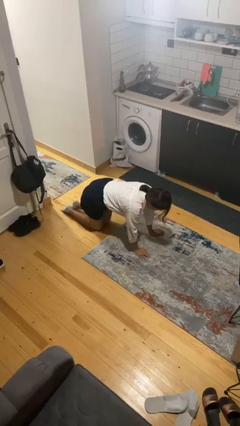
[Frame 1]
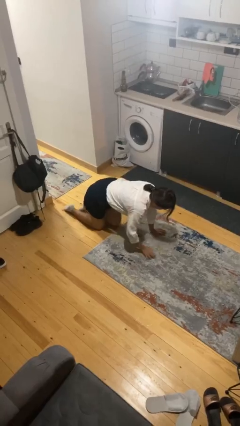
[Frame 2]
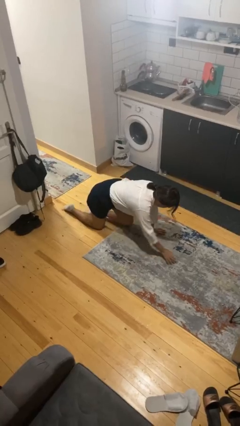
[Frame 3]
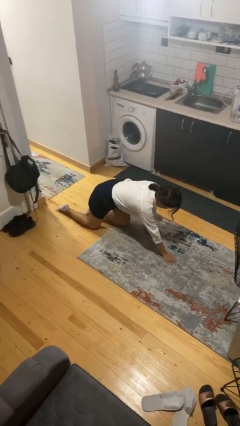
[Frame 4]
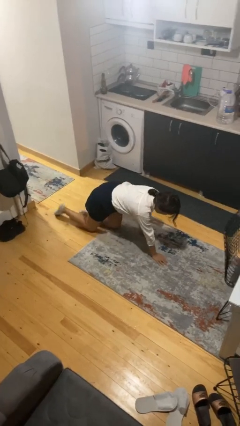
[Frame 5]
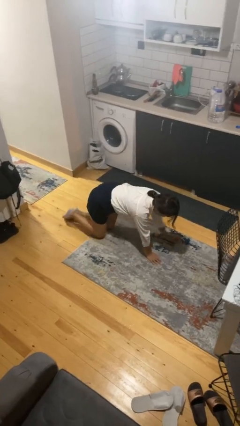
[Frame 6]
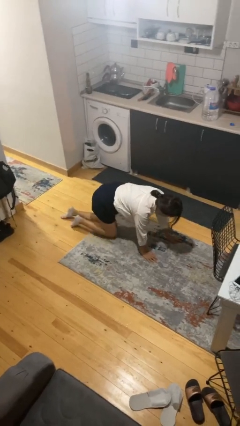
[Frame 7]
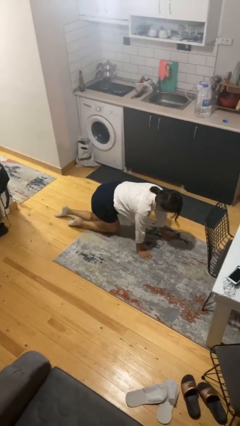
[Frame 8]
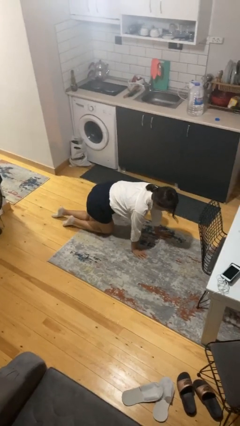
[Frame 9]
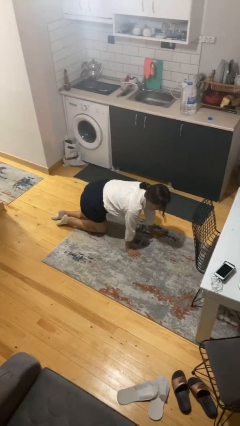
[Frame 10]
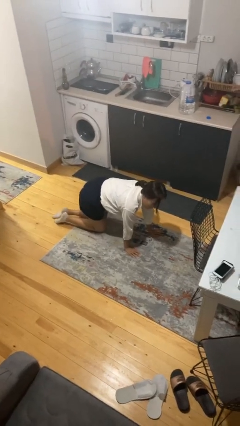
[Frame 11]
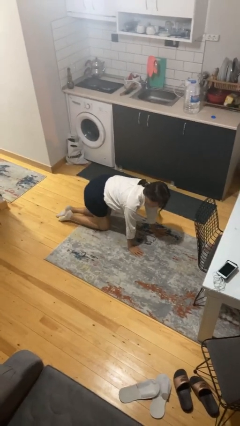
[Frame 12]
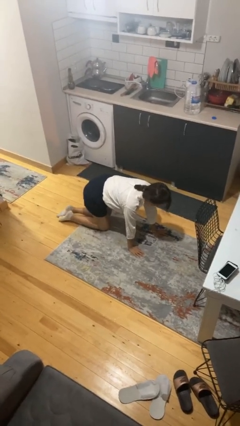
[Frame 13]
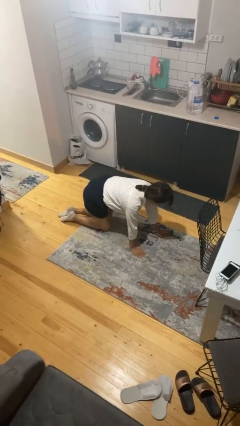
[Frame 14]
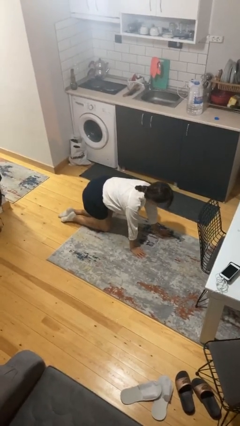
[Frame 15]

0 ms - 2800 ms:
person crawls

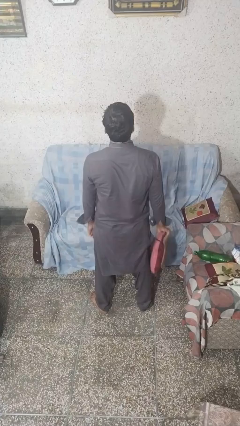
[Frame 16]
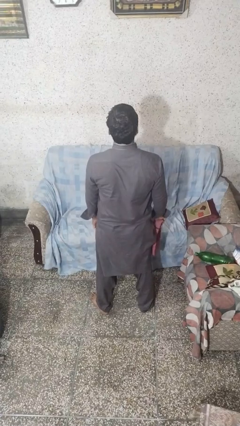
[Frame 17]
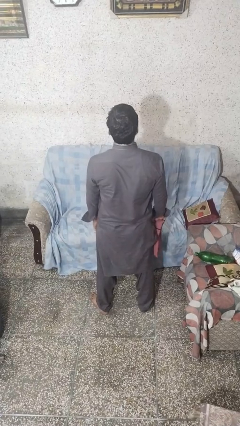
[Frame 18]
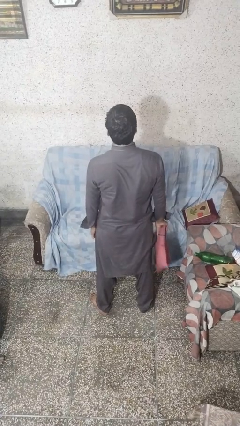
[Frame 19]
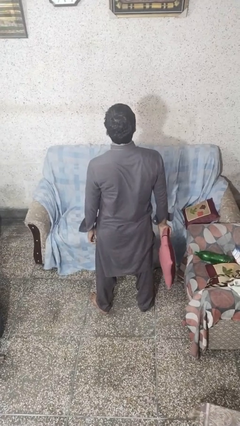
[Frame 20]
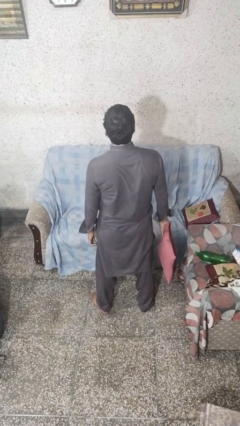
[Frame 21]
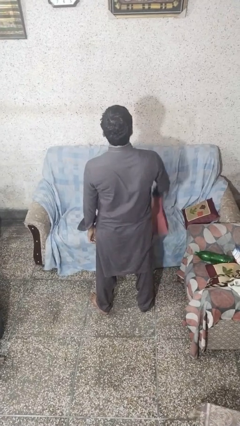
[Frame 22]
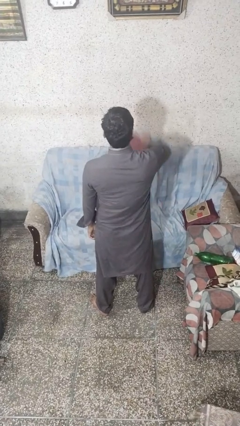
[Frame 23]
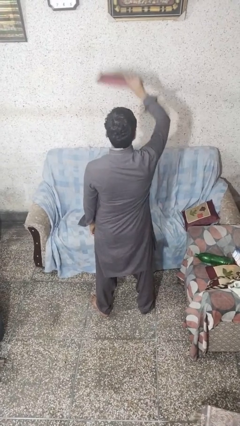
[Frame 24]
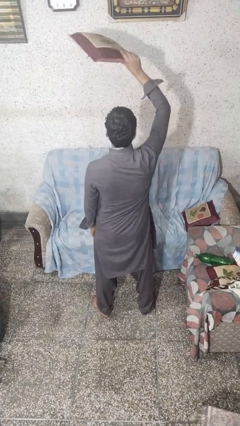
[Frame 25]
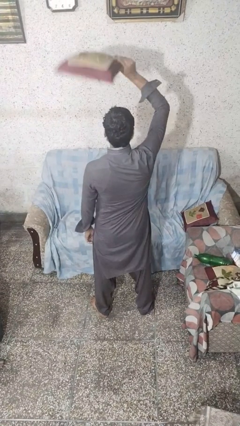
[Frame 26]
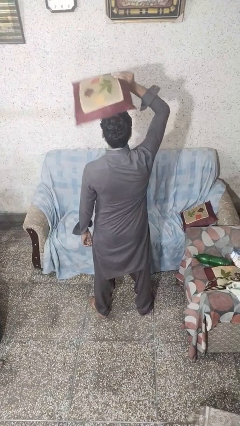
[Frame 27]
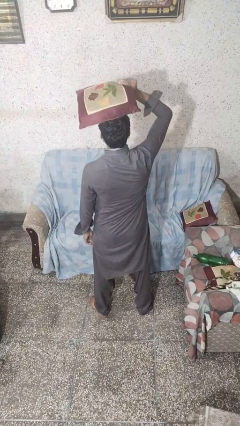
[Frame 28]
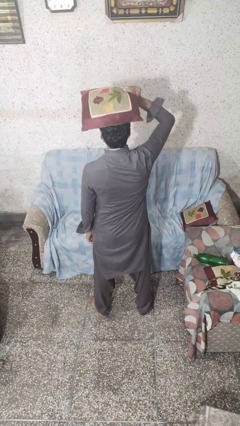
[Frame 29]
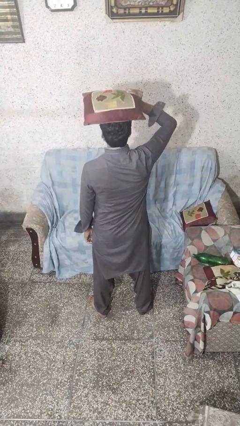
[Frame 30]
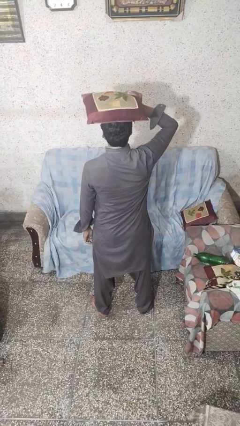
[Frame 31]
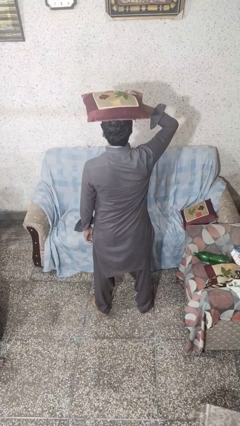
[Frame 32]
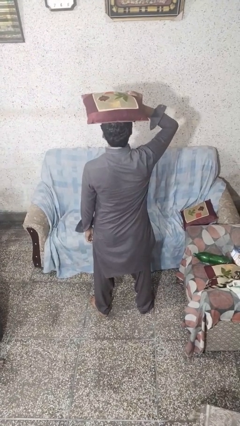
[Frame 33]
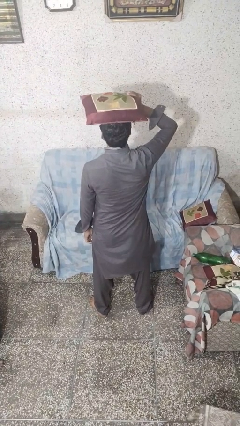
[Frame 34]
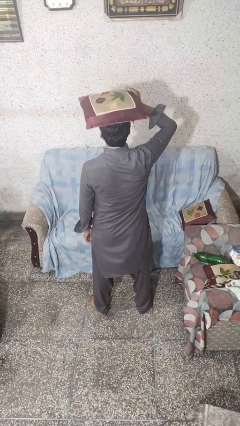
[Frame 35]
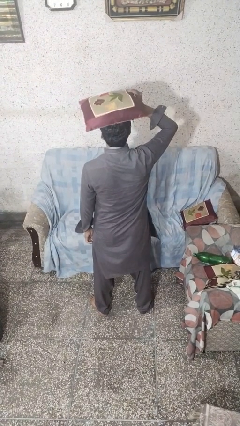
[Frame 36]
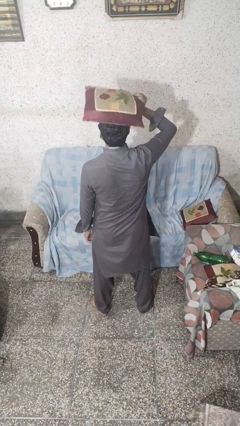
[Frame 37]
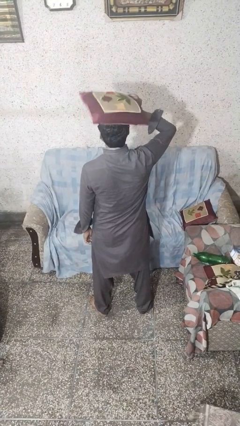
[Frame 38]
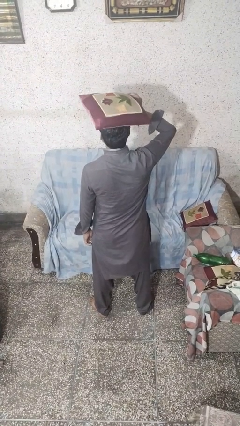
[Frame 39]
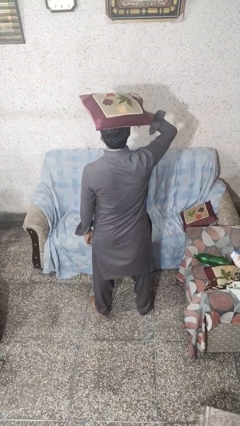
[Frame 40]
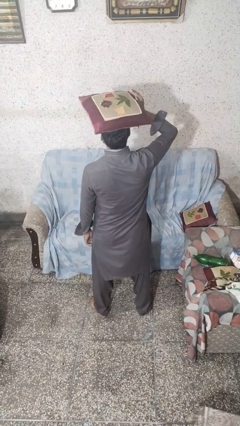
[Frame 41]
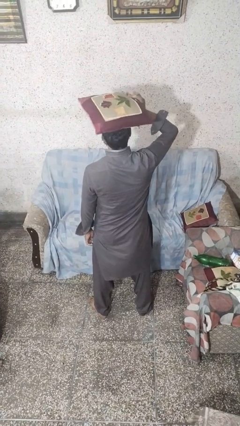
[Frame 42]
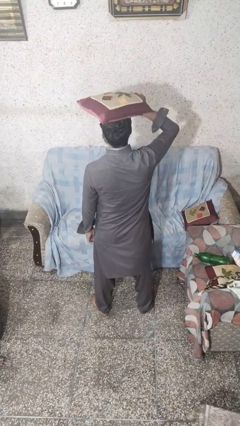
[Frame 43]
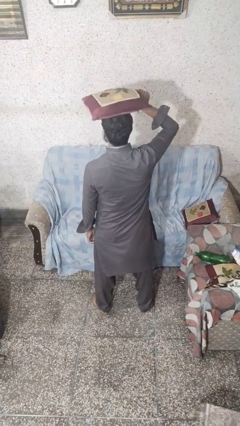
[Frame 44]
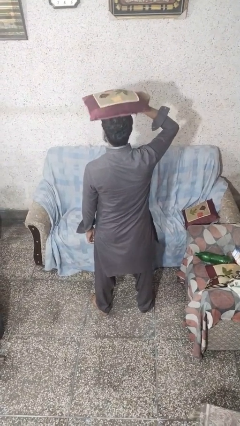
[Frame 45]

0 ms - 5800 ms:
person holds object above head

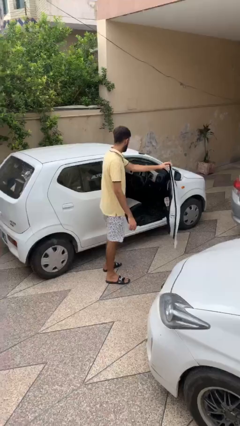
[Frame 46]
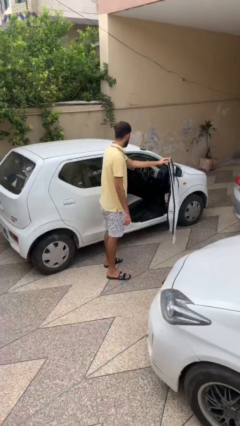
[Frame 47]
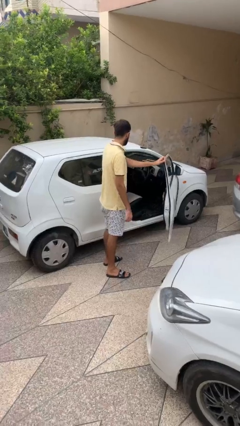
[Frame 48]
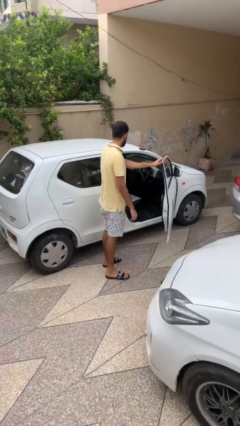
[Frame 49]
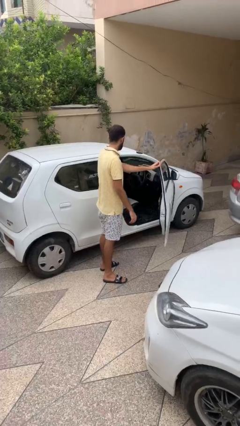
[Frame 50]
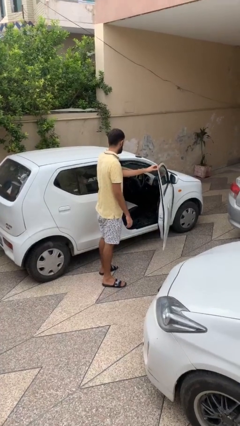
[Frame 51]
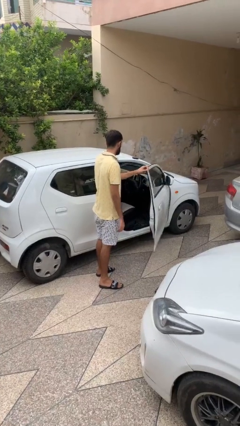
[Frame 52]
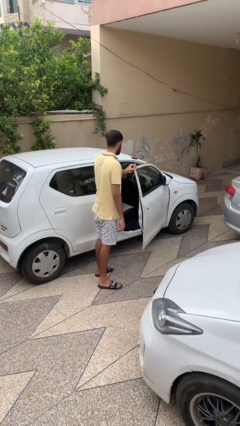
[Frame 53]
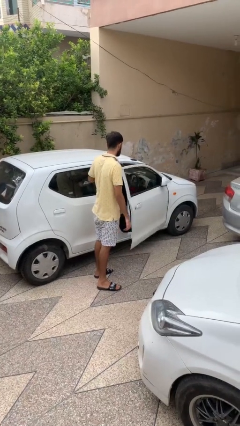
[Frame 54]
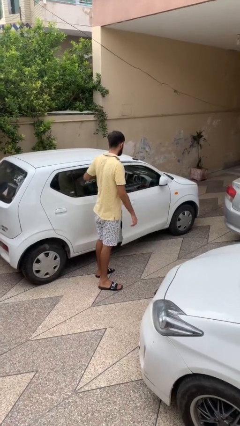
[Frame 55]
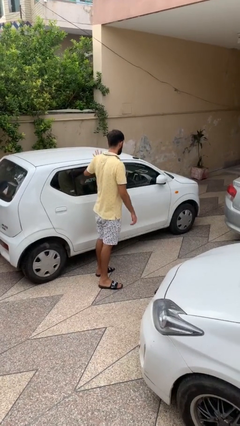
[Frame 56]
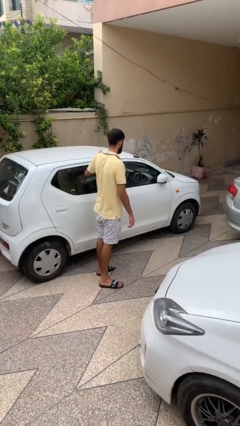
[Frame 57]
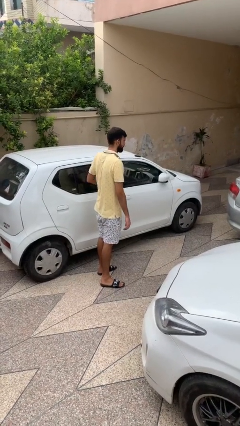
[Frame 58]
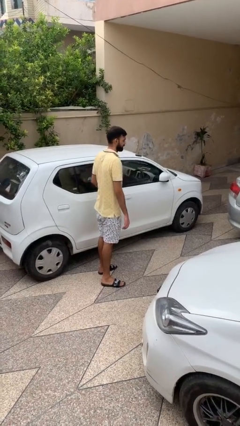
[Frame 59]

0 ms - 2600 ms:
person closes car door

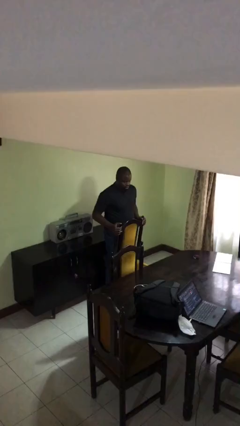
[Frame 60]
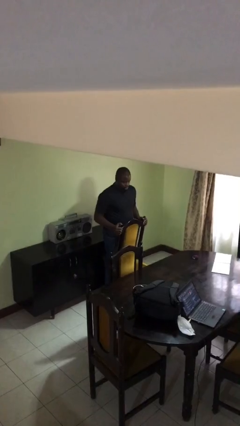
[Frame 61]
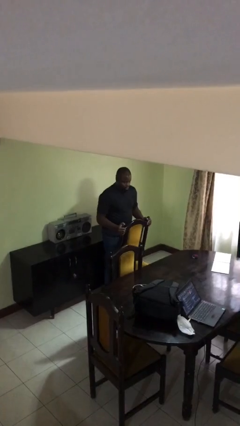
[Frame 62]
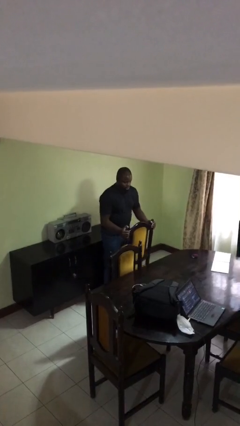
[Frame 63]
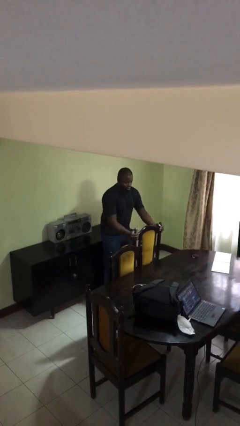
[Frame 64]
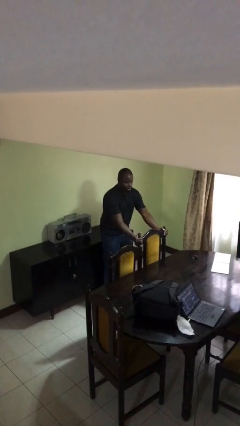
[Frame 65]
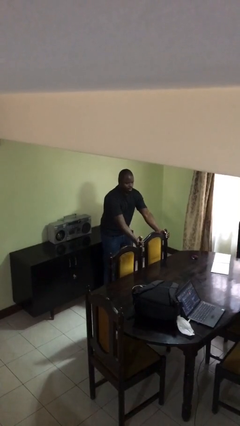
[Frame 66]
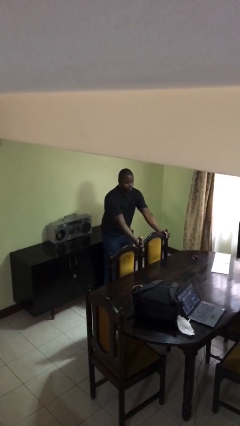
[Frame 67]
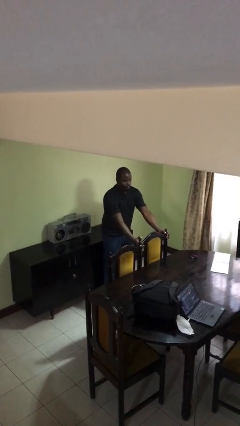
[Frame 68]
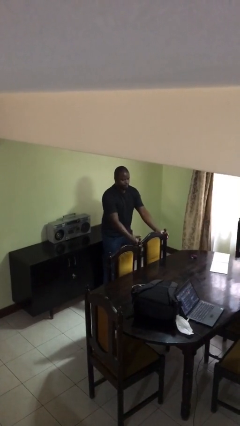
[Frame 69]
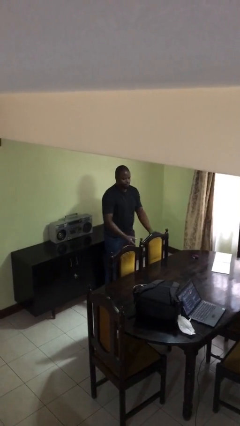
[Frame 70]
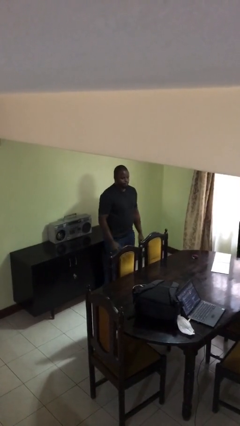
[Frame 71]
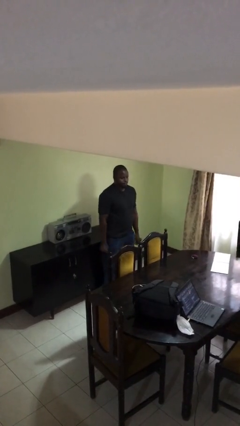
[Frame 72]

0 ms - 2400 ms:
person pushes in chair

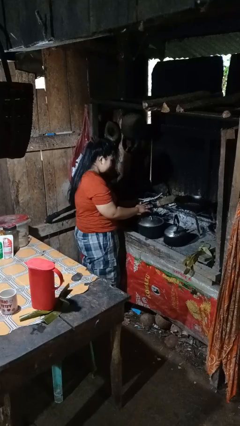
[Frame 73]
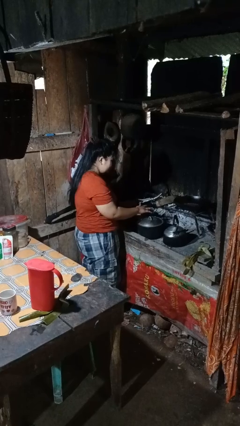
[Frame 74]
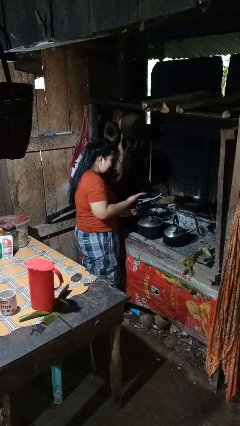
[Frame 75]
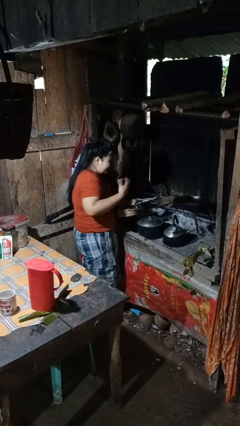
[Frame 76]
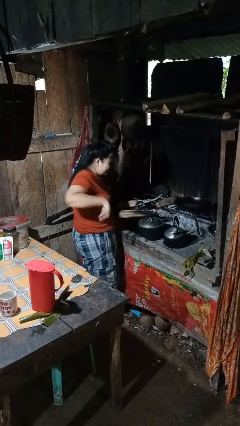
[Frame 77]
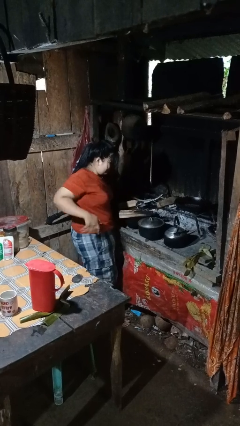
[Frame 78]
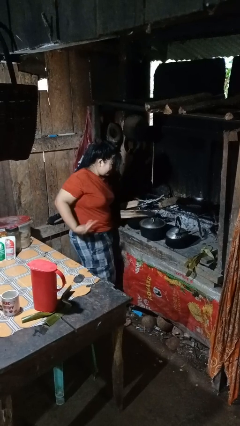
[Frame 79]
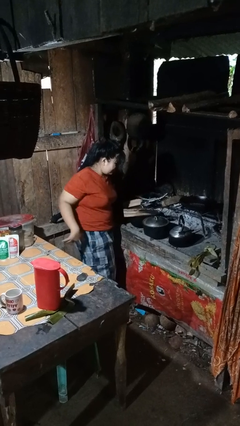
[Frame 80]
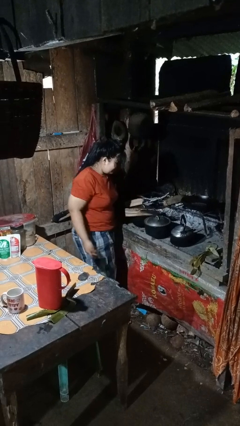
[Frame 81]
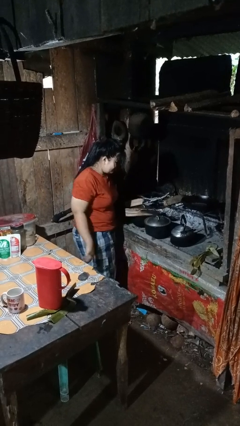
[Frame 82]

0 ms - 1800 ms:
person burns hand

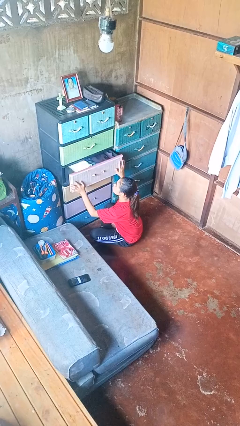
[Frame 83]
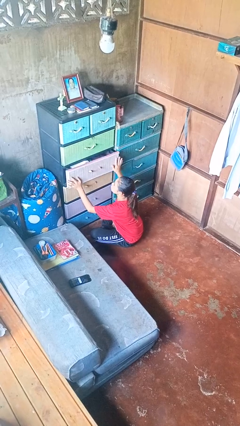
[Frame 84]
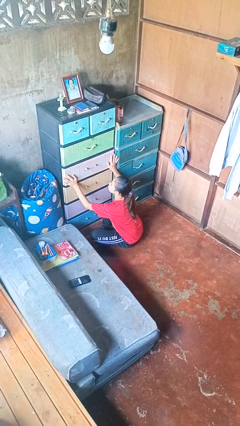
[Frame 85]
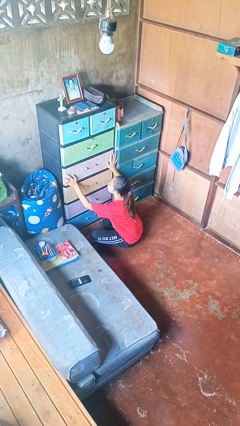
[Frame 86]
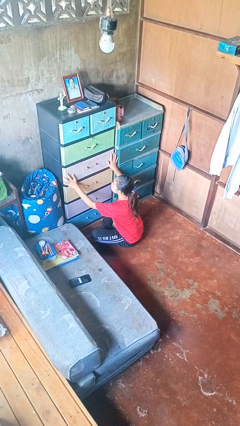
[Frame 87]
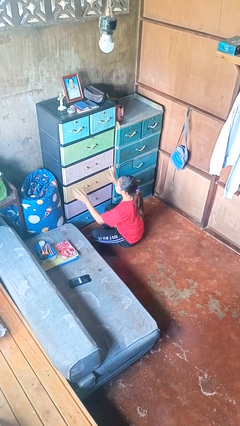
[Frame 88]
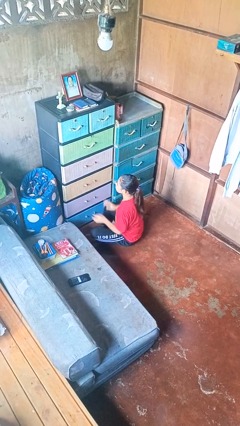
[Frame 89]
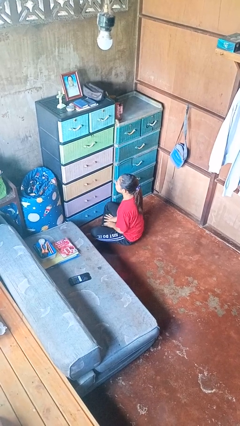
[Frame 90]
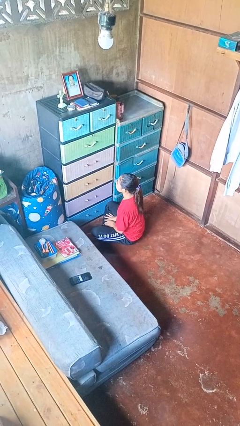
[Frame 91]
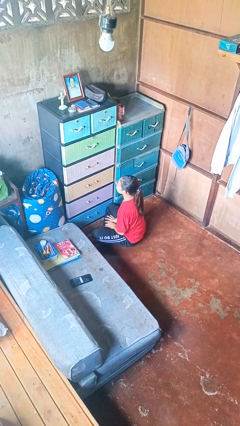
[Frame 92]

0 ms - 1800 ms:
person closes dresser drawer
